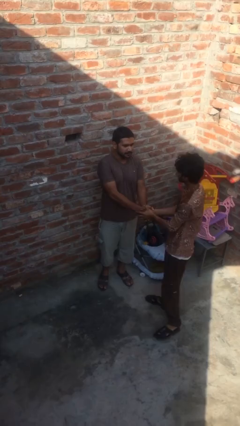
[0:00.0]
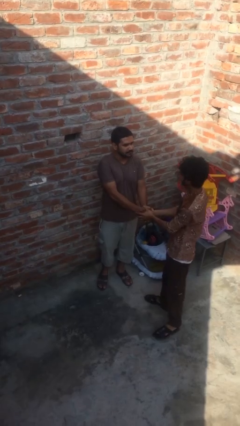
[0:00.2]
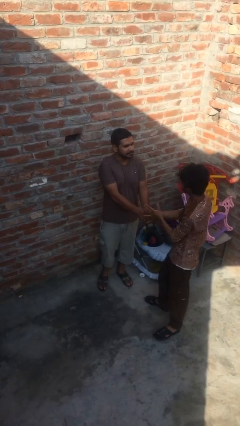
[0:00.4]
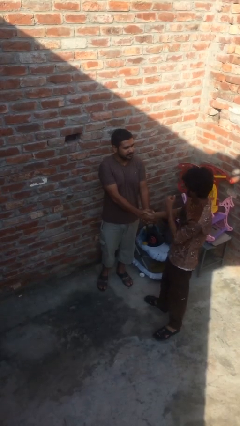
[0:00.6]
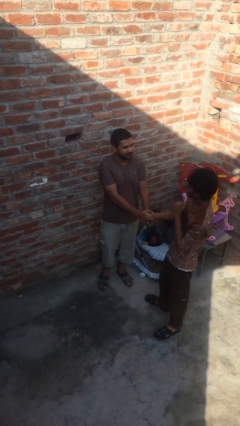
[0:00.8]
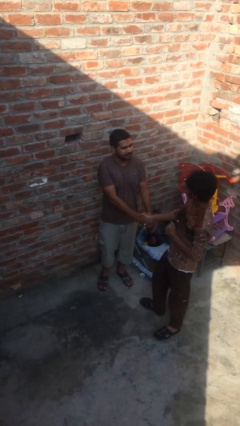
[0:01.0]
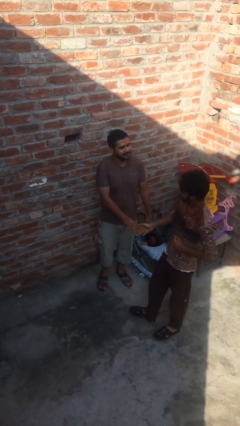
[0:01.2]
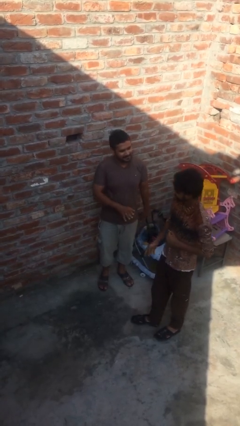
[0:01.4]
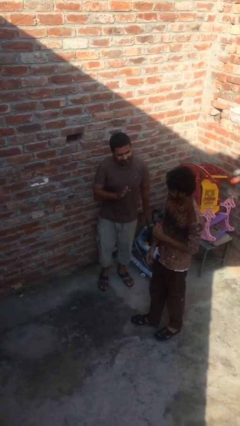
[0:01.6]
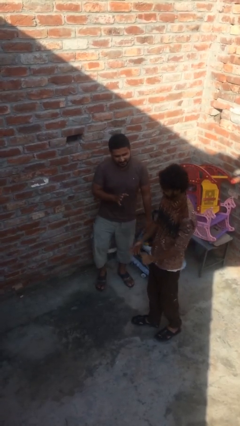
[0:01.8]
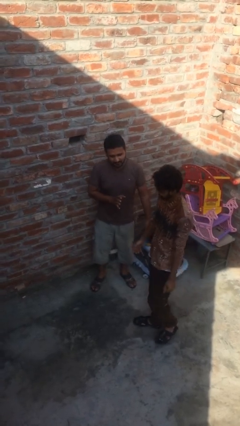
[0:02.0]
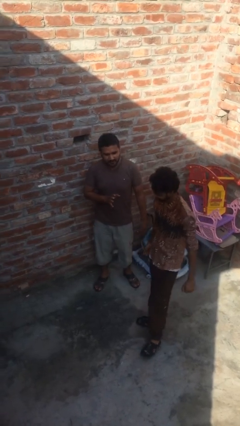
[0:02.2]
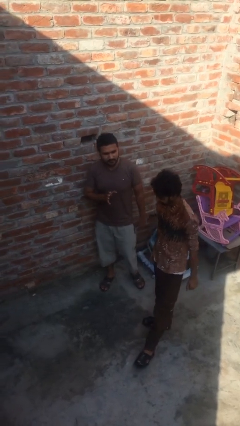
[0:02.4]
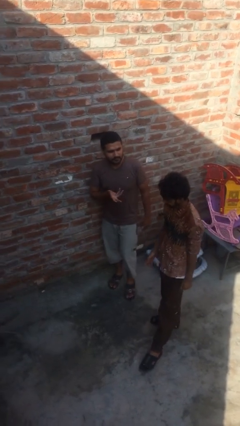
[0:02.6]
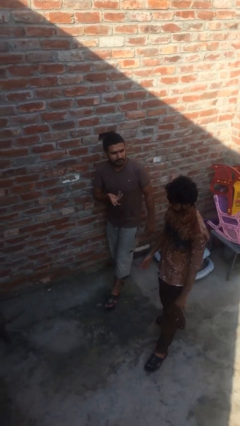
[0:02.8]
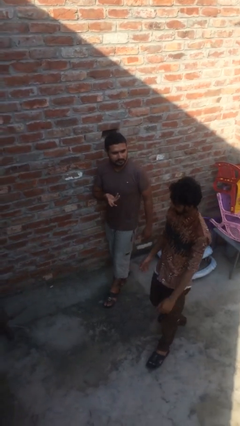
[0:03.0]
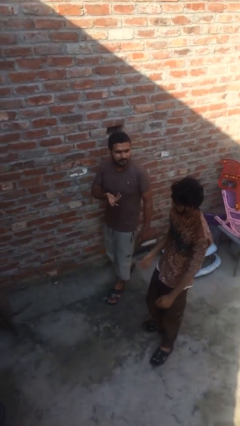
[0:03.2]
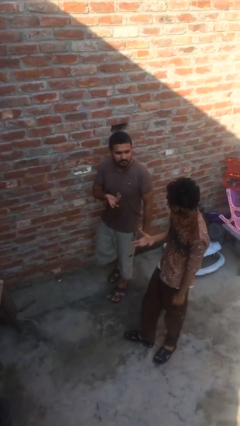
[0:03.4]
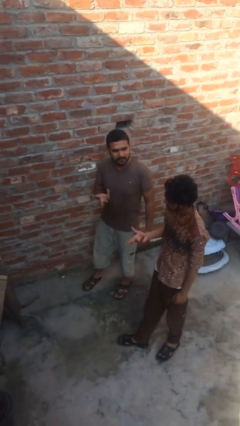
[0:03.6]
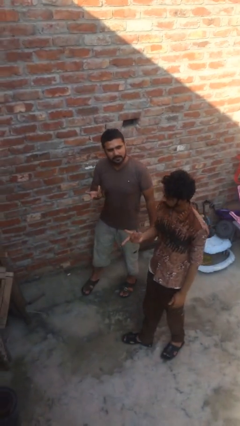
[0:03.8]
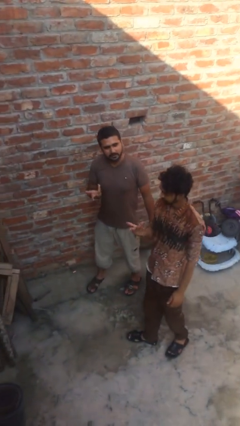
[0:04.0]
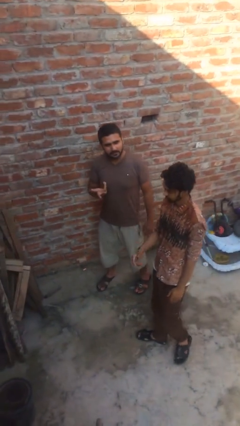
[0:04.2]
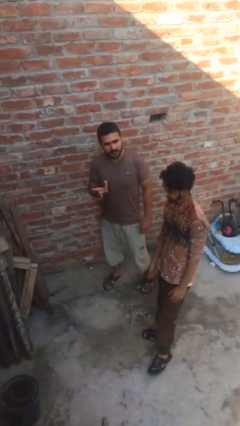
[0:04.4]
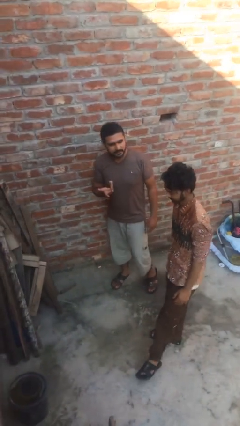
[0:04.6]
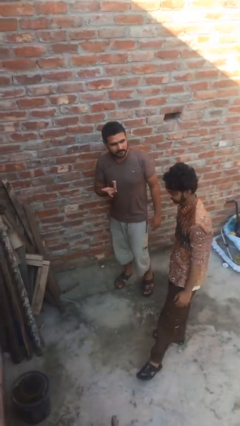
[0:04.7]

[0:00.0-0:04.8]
person talks to person

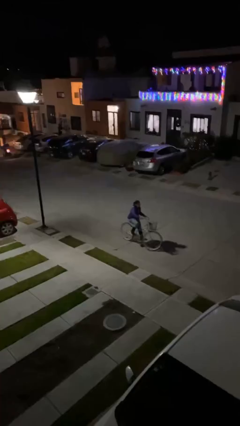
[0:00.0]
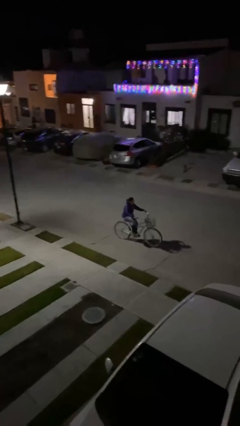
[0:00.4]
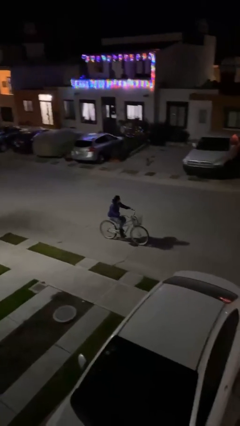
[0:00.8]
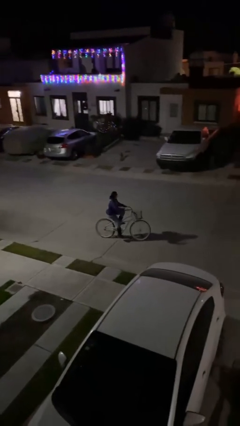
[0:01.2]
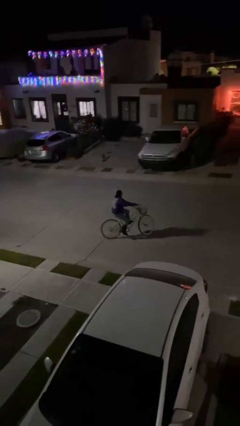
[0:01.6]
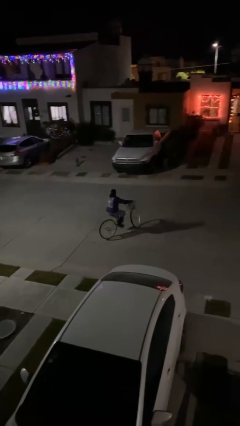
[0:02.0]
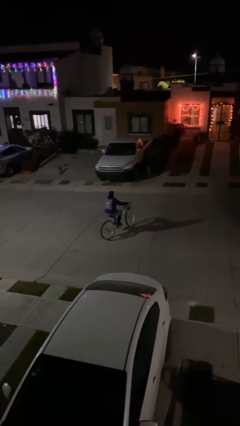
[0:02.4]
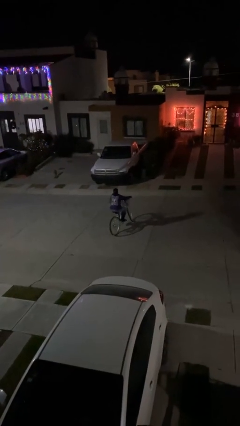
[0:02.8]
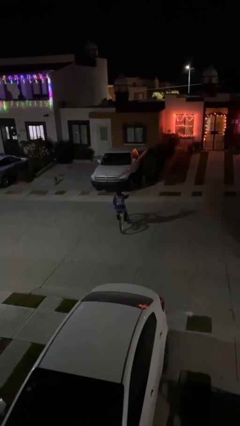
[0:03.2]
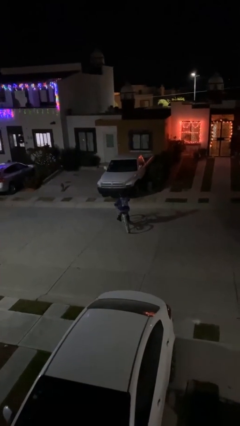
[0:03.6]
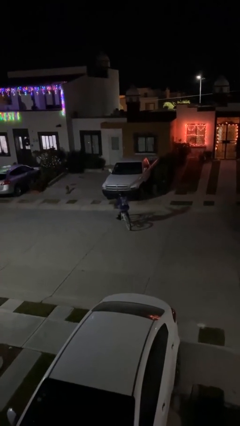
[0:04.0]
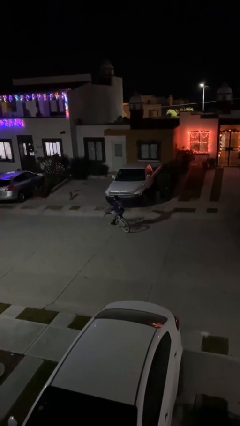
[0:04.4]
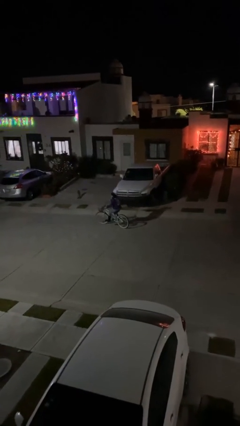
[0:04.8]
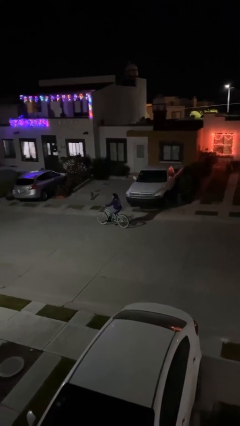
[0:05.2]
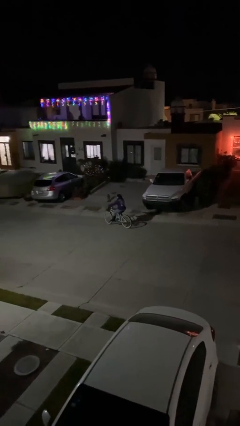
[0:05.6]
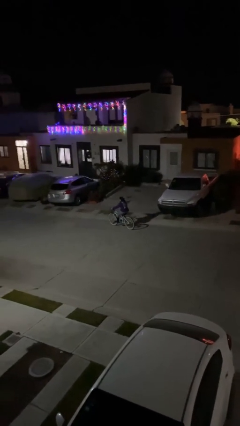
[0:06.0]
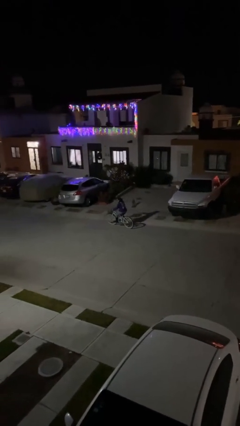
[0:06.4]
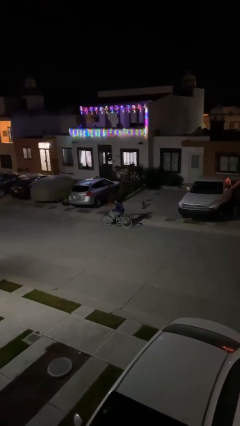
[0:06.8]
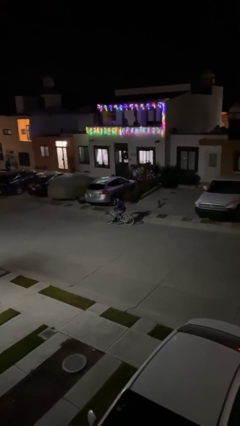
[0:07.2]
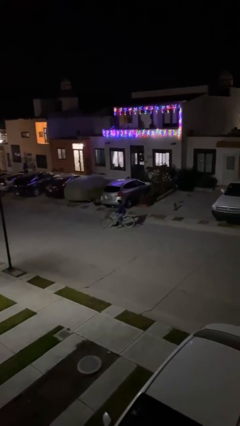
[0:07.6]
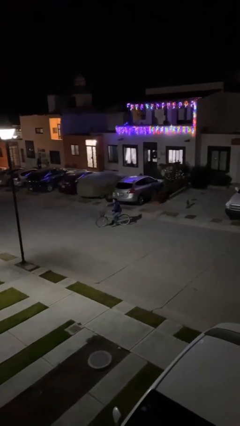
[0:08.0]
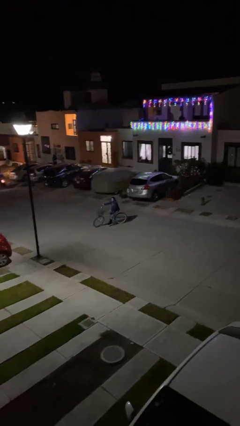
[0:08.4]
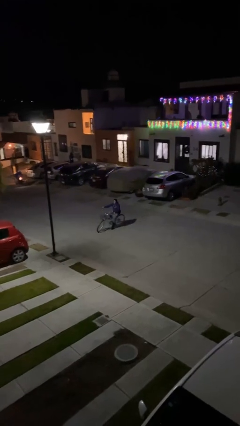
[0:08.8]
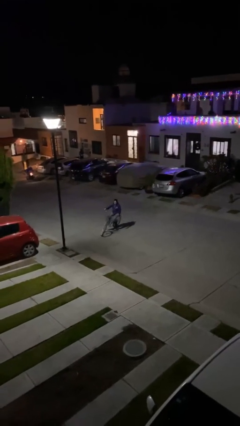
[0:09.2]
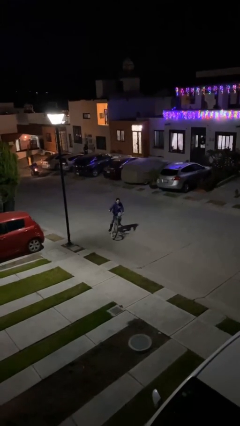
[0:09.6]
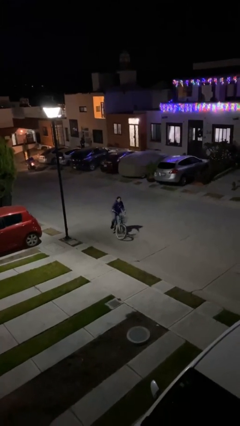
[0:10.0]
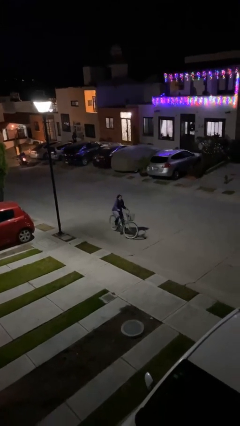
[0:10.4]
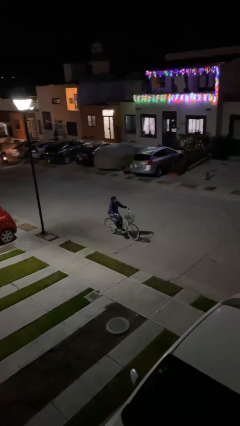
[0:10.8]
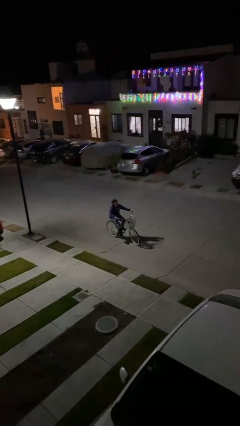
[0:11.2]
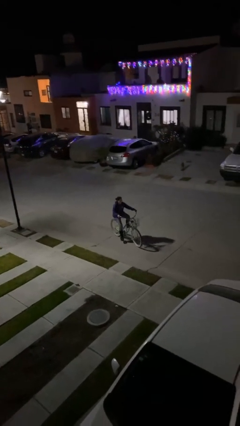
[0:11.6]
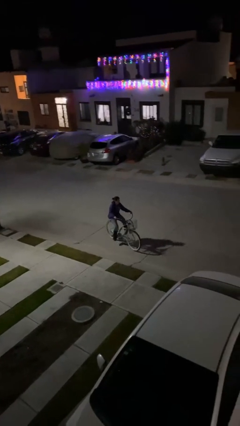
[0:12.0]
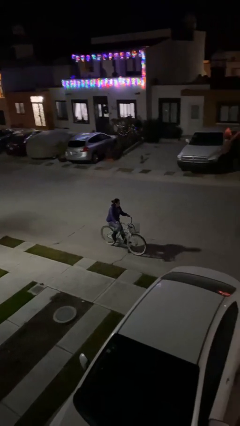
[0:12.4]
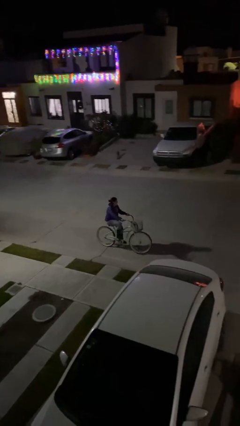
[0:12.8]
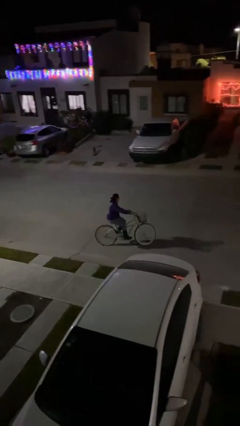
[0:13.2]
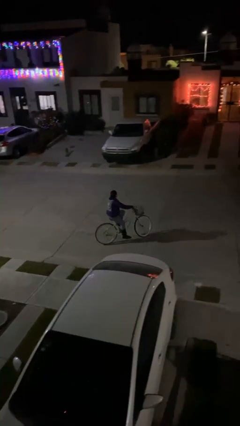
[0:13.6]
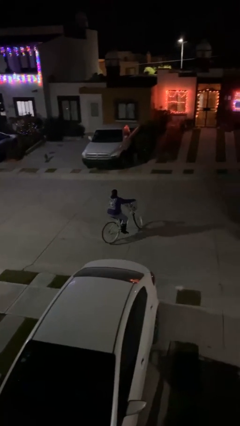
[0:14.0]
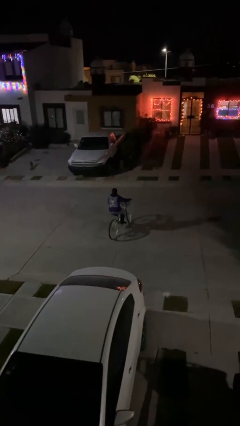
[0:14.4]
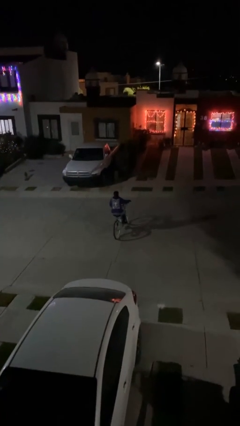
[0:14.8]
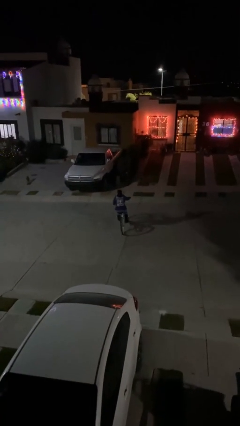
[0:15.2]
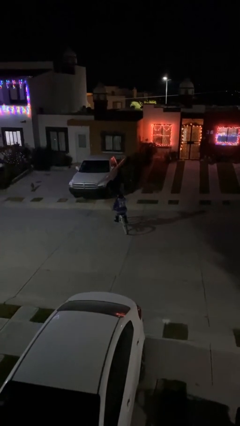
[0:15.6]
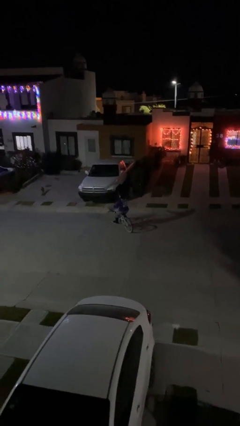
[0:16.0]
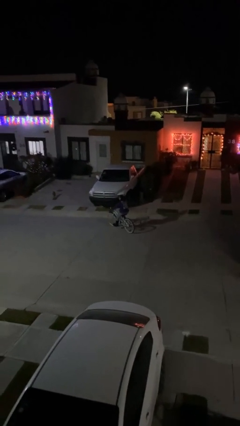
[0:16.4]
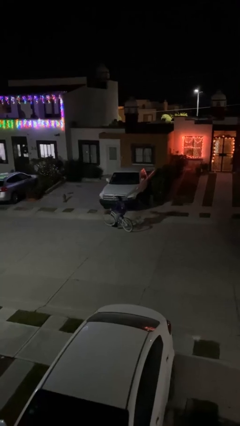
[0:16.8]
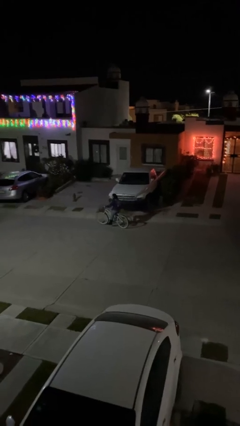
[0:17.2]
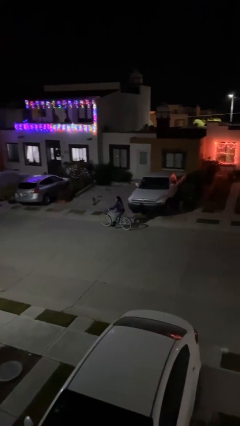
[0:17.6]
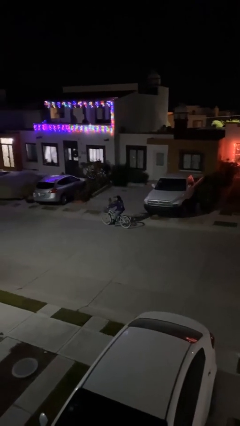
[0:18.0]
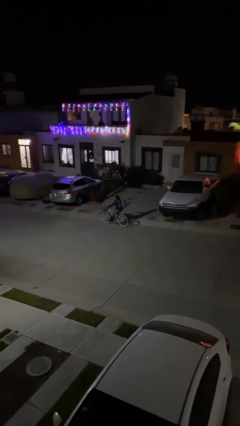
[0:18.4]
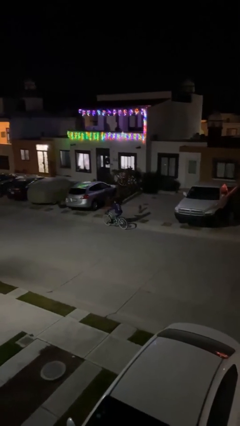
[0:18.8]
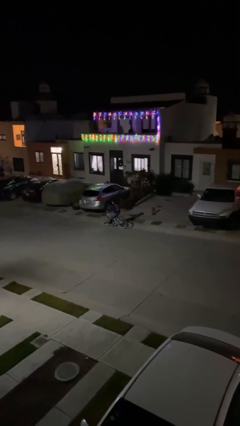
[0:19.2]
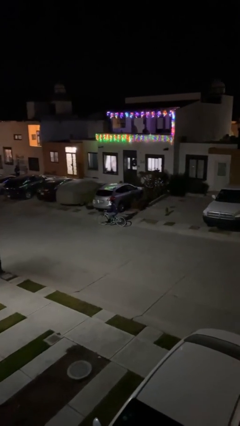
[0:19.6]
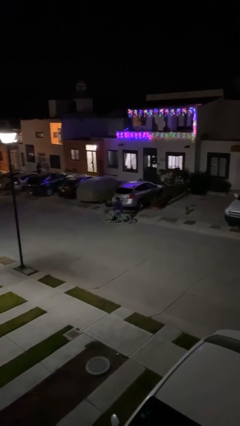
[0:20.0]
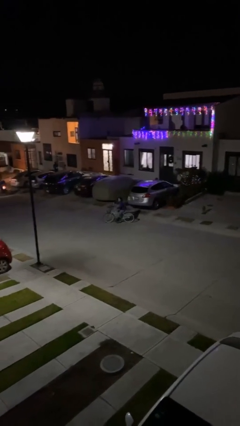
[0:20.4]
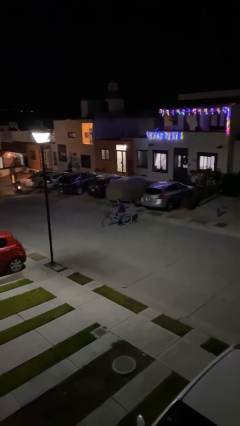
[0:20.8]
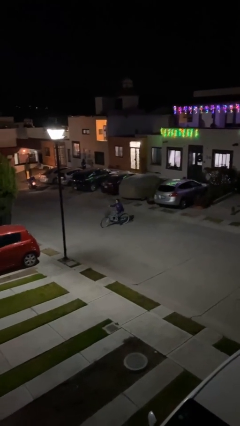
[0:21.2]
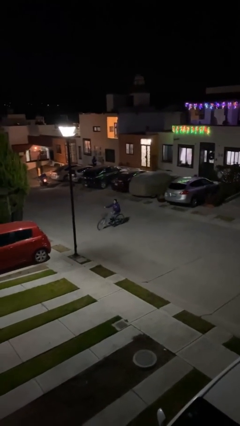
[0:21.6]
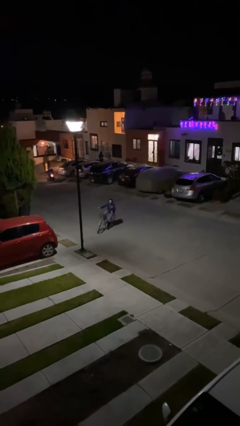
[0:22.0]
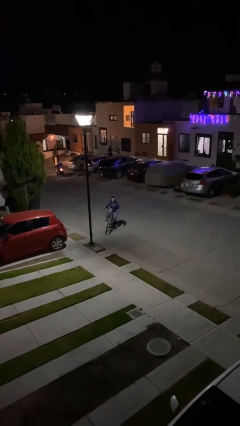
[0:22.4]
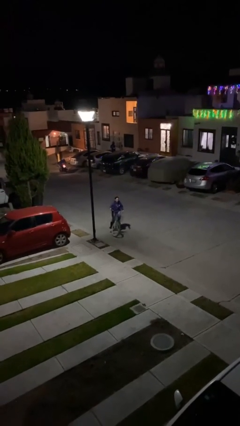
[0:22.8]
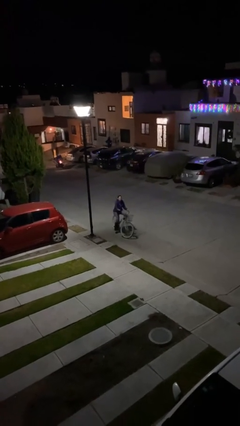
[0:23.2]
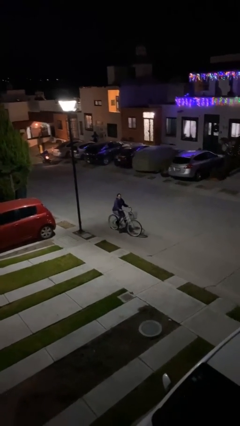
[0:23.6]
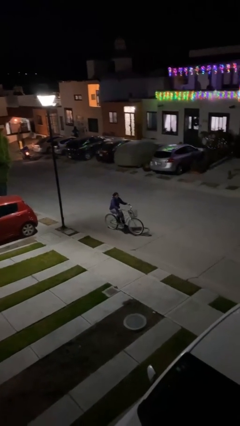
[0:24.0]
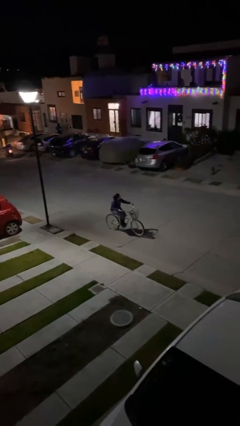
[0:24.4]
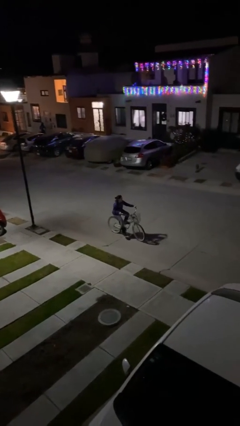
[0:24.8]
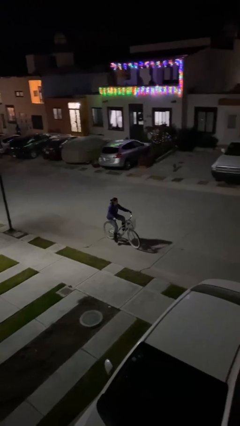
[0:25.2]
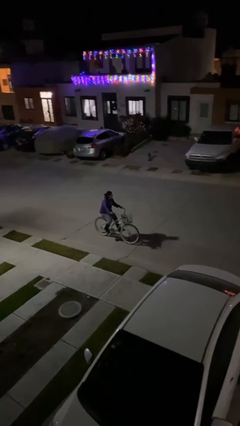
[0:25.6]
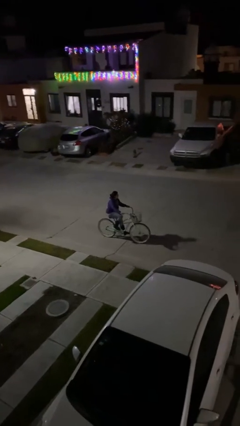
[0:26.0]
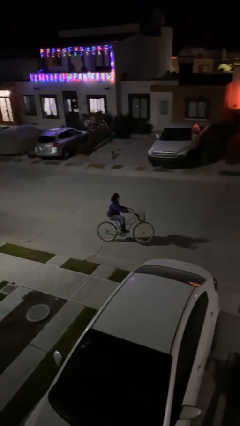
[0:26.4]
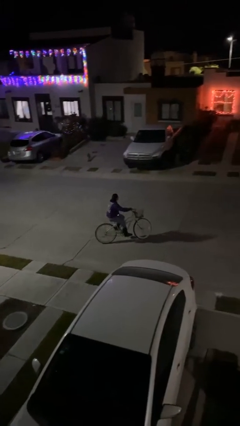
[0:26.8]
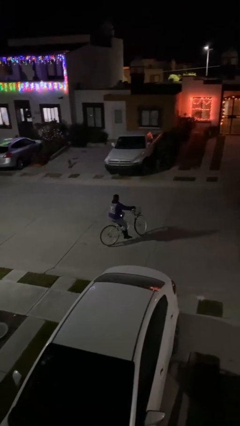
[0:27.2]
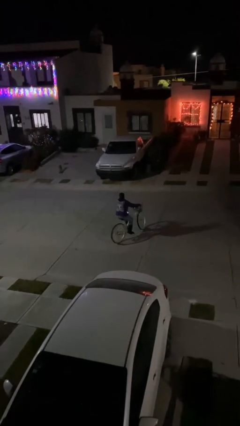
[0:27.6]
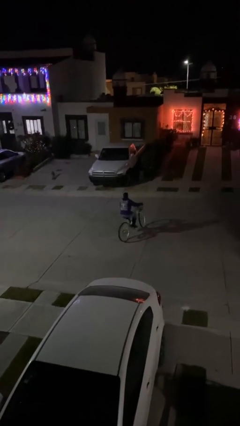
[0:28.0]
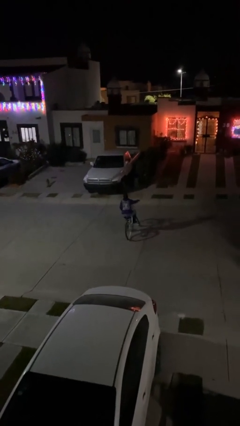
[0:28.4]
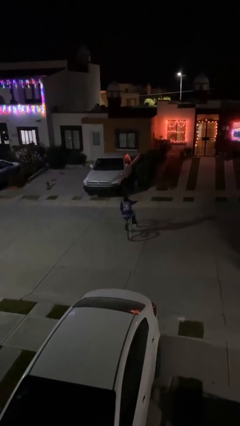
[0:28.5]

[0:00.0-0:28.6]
person rides bicycle
